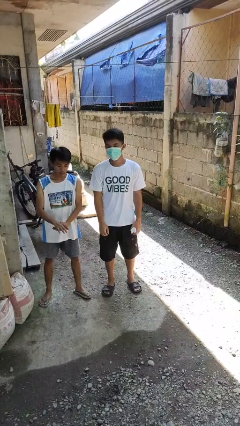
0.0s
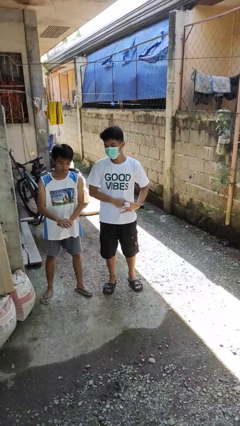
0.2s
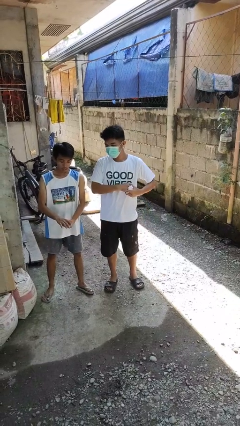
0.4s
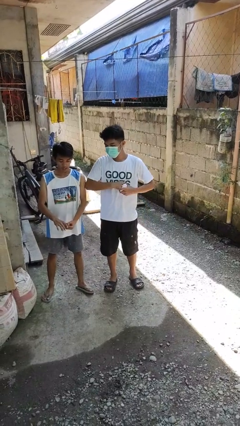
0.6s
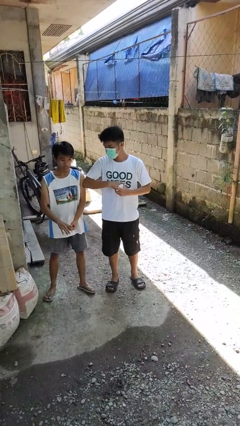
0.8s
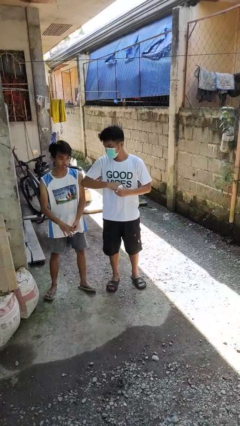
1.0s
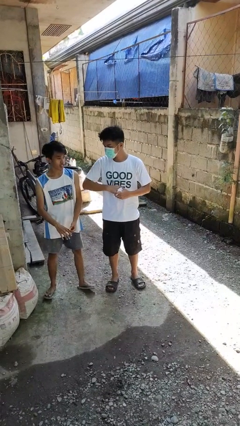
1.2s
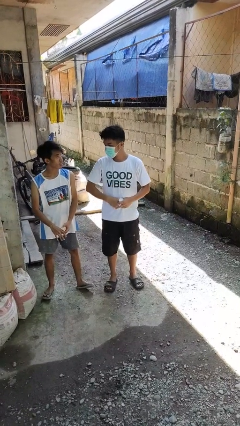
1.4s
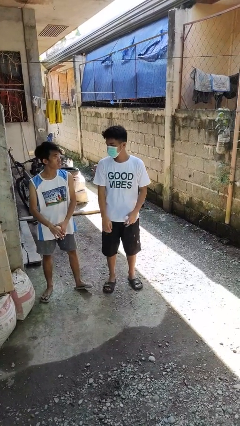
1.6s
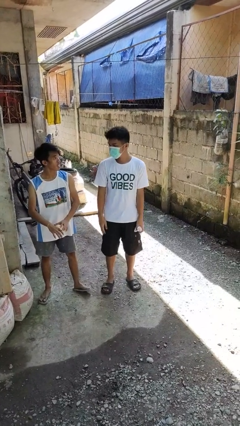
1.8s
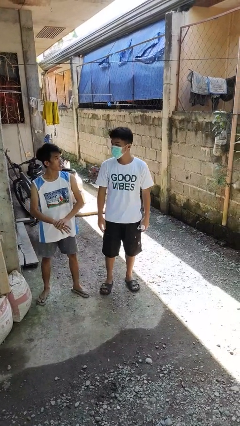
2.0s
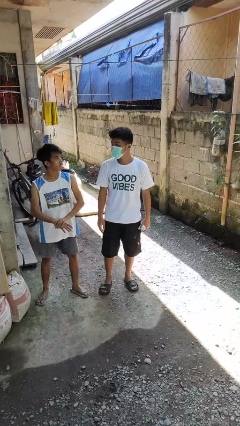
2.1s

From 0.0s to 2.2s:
person nudges person with elbow

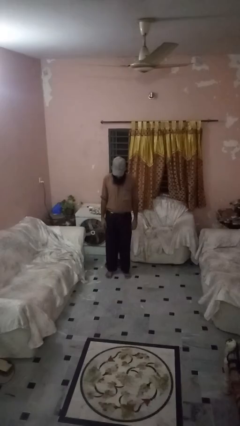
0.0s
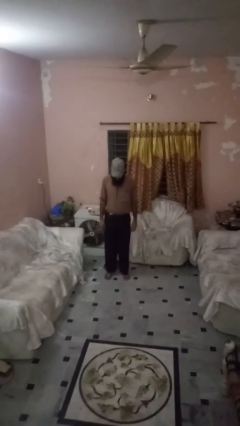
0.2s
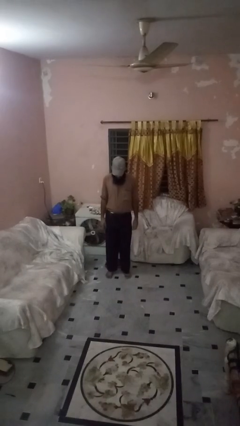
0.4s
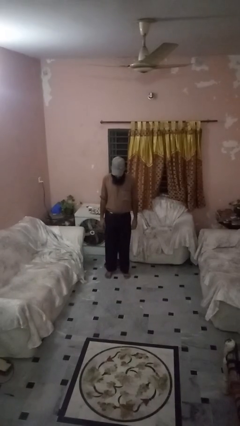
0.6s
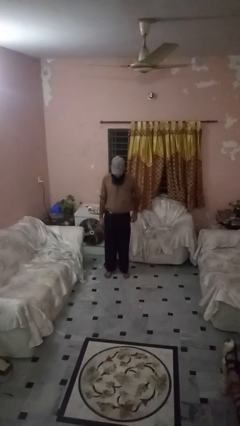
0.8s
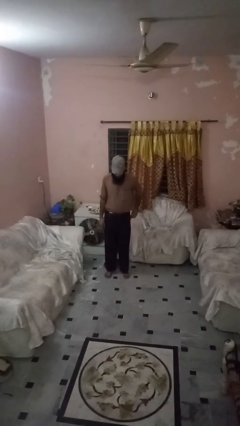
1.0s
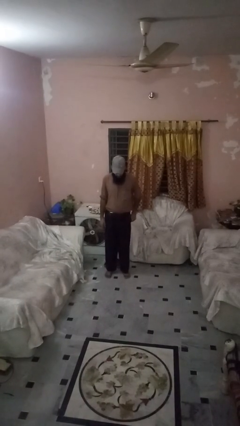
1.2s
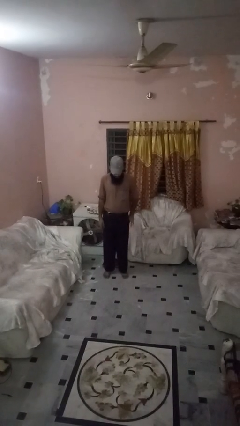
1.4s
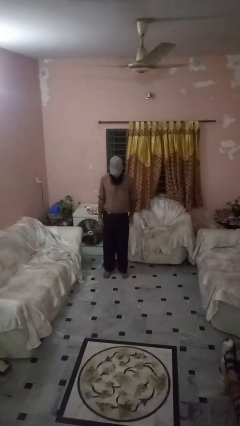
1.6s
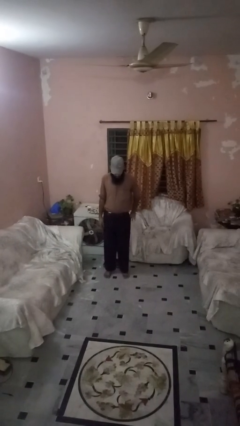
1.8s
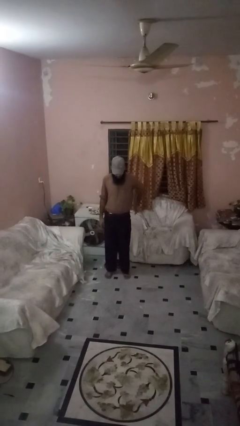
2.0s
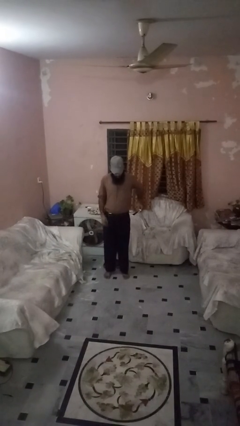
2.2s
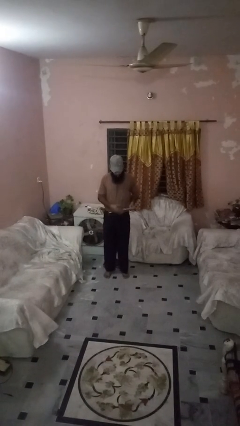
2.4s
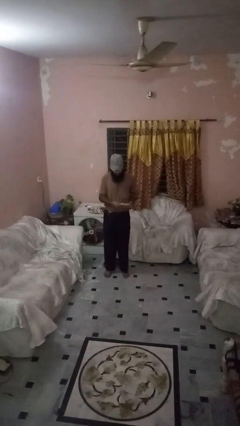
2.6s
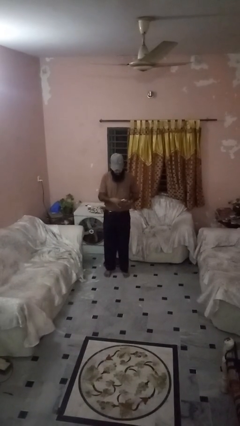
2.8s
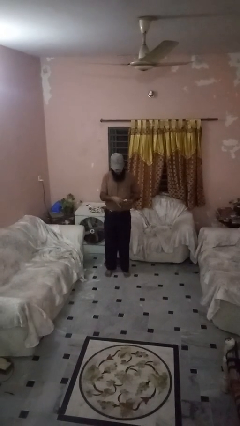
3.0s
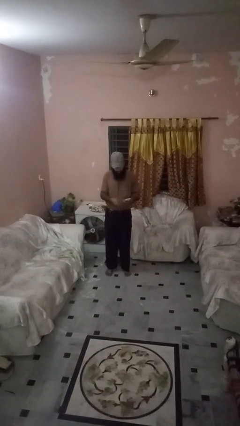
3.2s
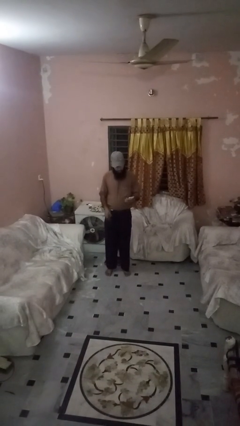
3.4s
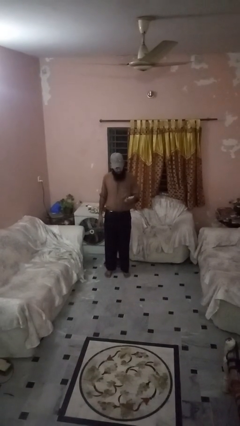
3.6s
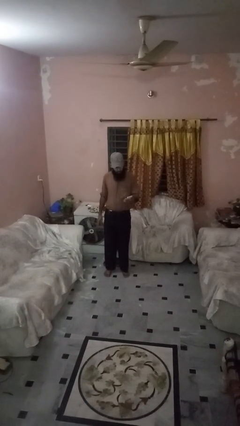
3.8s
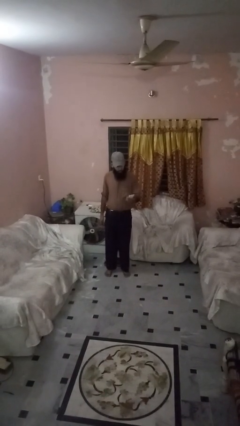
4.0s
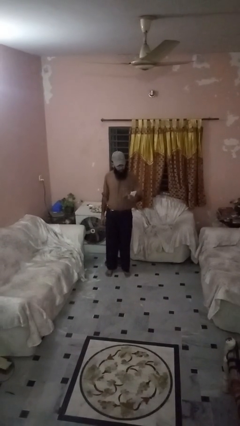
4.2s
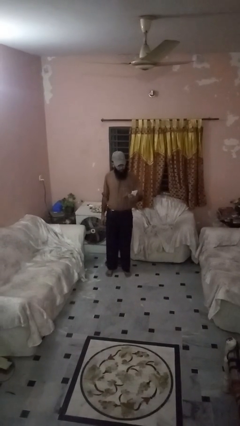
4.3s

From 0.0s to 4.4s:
person takes phone from pocket

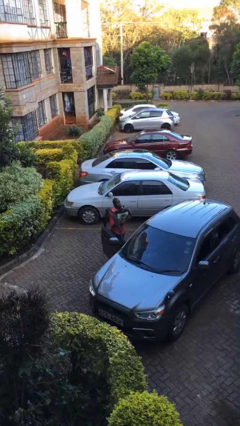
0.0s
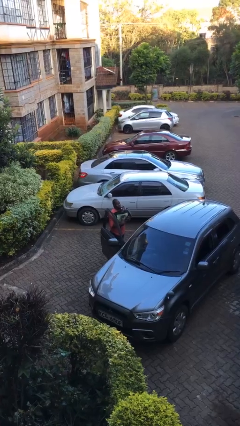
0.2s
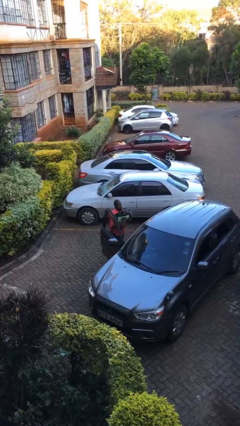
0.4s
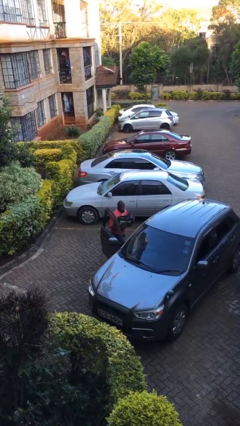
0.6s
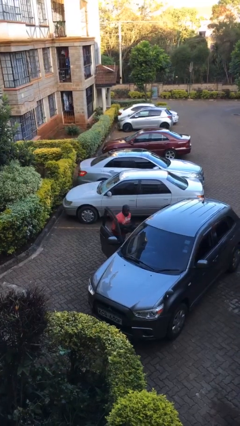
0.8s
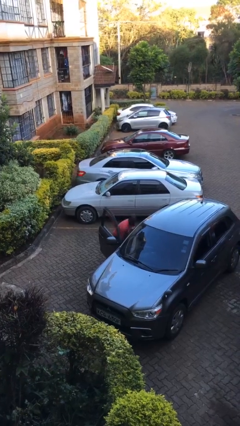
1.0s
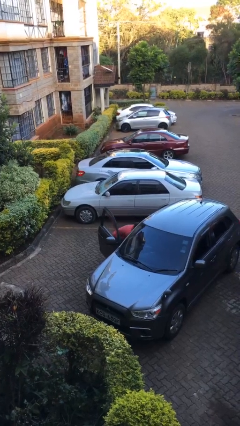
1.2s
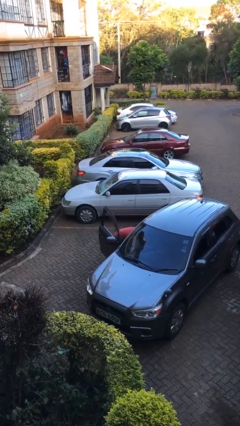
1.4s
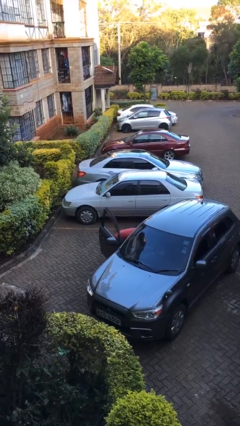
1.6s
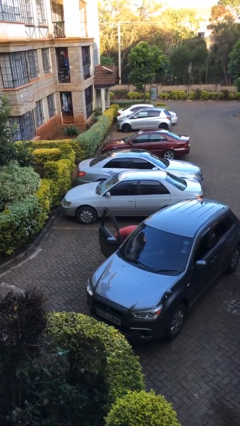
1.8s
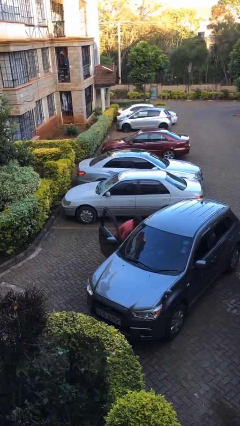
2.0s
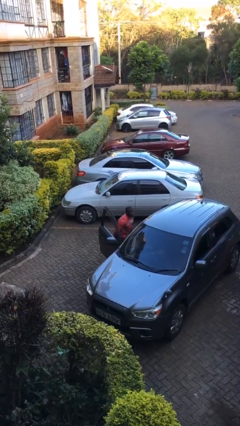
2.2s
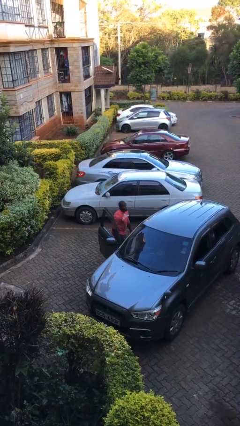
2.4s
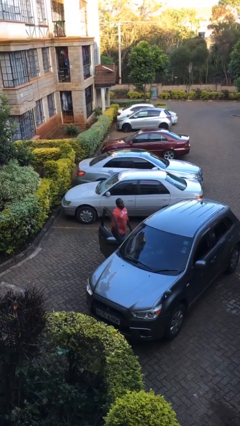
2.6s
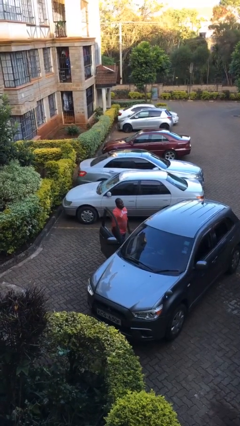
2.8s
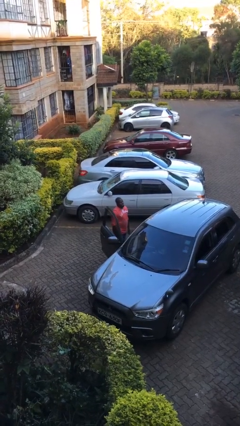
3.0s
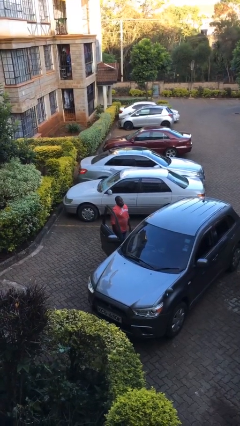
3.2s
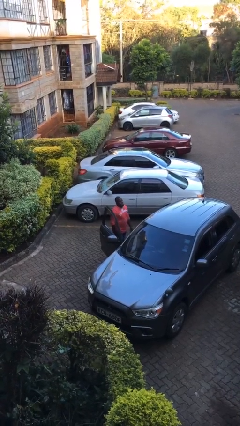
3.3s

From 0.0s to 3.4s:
person loads car

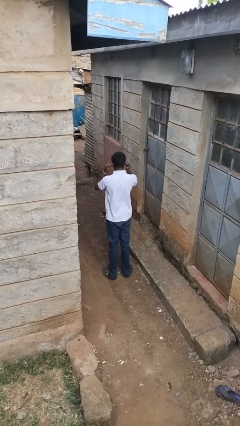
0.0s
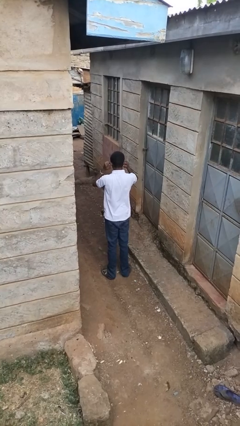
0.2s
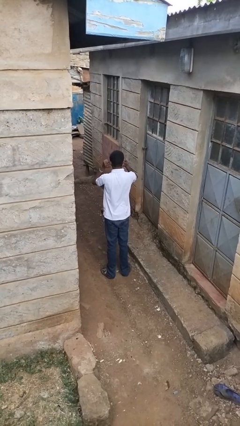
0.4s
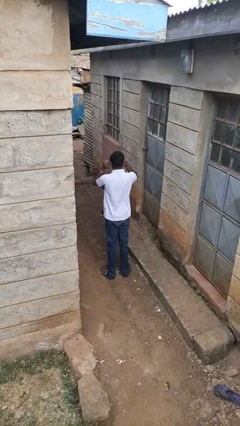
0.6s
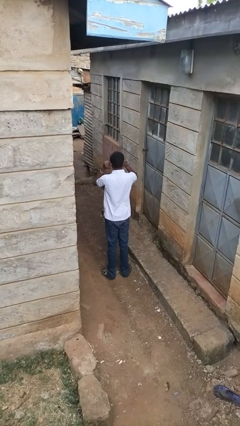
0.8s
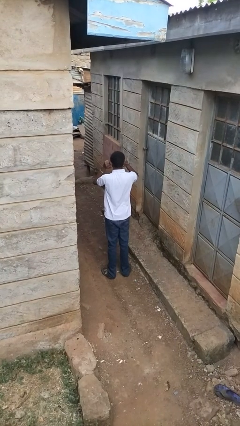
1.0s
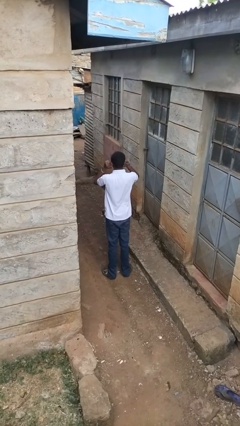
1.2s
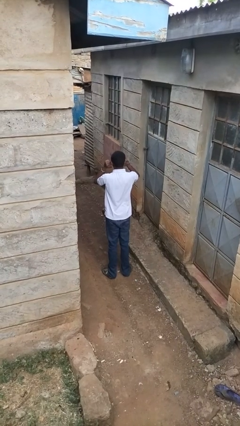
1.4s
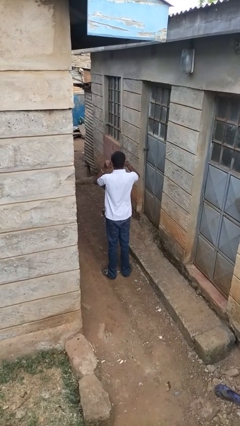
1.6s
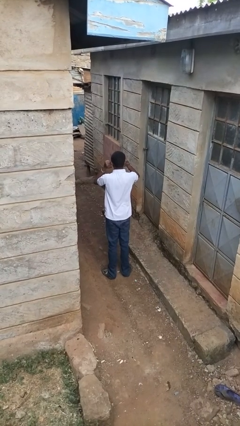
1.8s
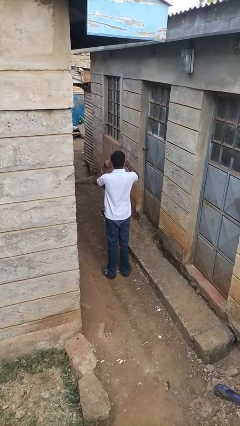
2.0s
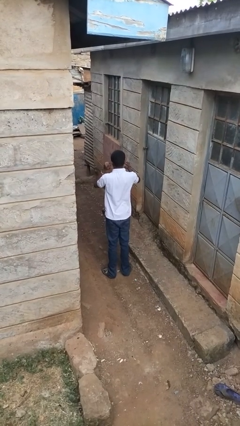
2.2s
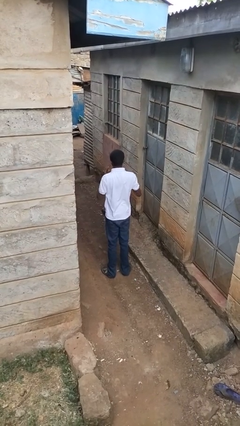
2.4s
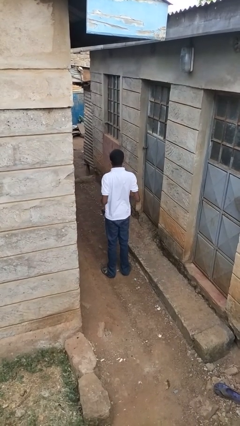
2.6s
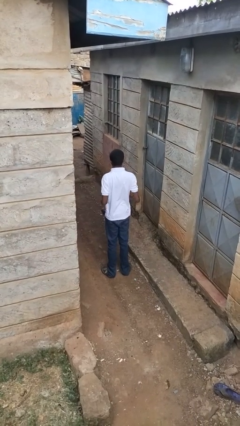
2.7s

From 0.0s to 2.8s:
person puts fingers in ear

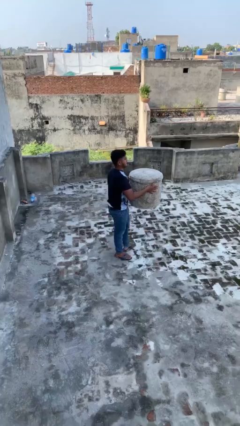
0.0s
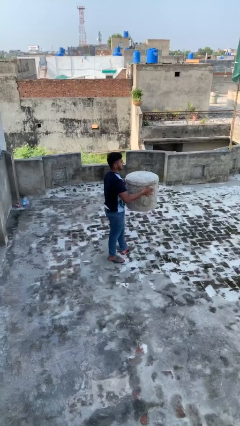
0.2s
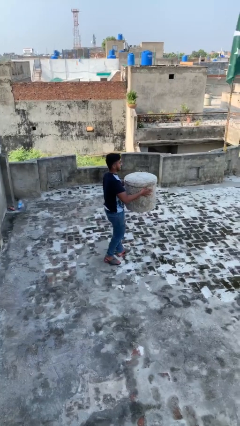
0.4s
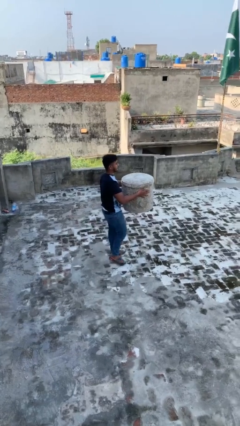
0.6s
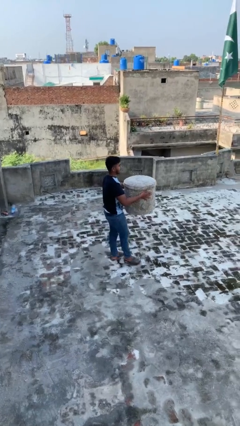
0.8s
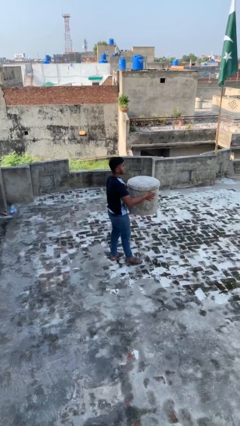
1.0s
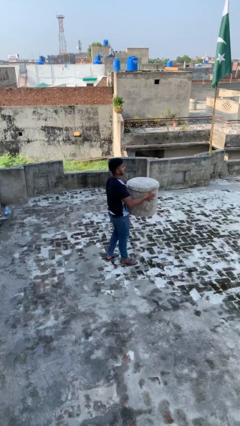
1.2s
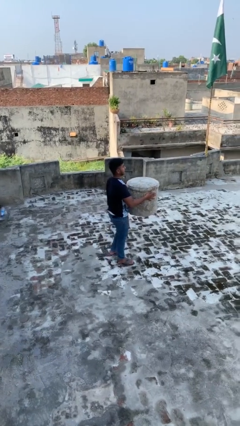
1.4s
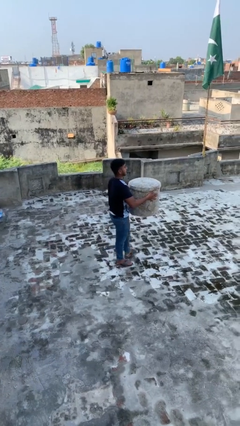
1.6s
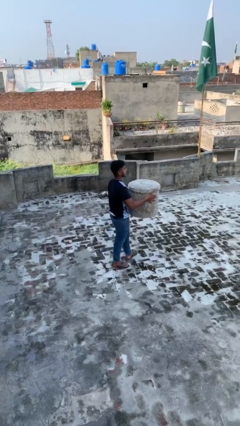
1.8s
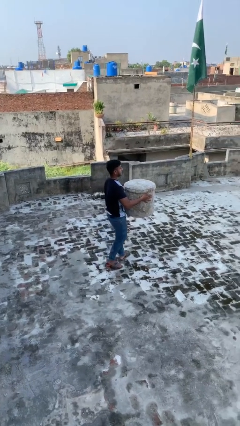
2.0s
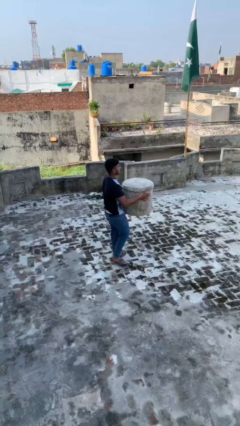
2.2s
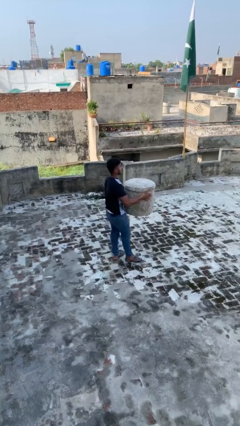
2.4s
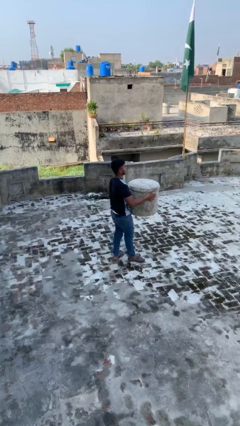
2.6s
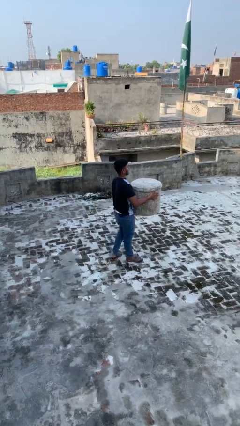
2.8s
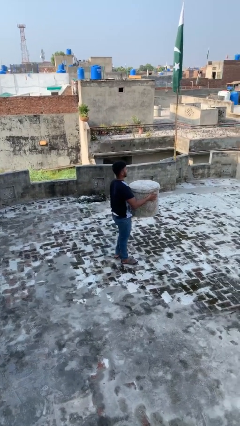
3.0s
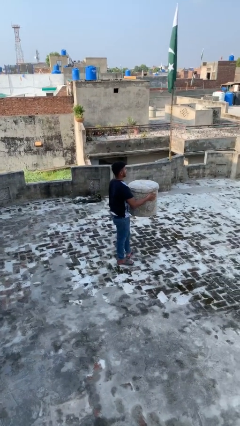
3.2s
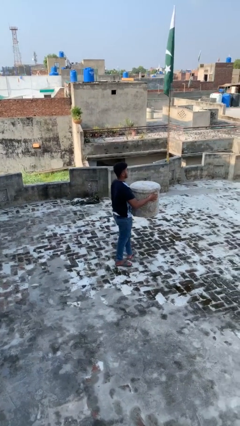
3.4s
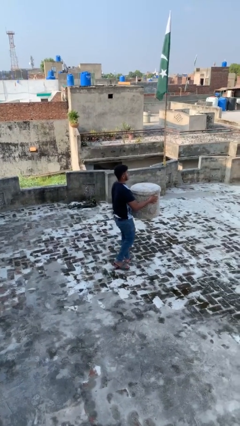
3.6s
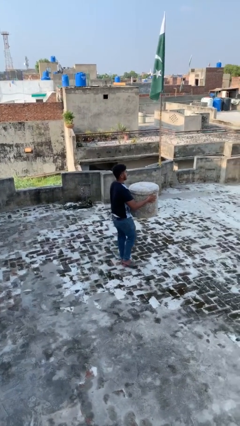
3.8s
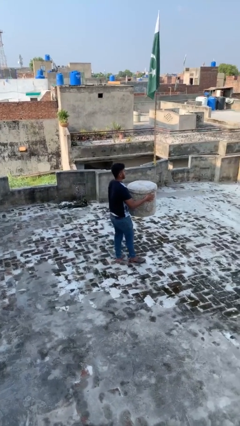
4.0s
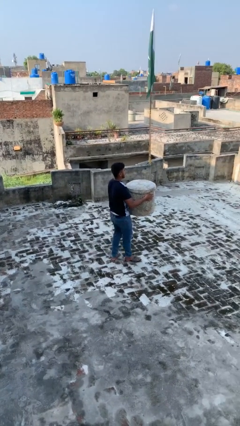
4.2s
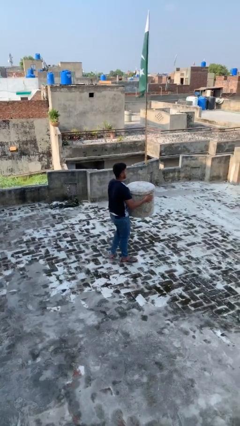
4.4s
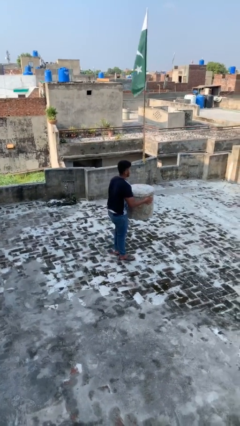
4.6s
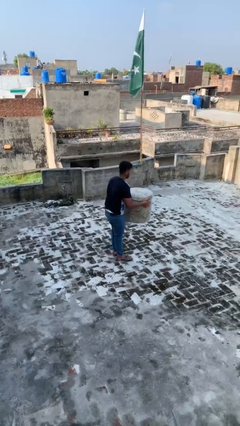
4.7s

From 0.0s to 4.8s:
person carries heavy object
